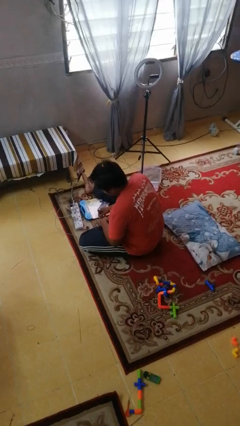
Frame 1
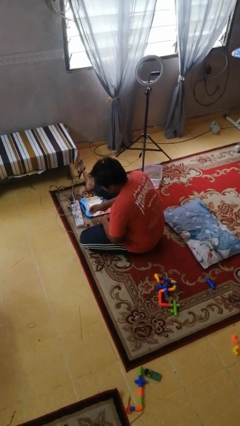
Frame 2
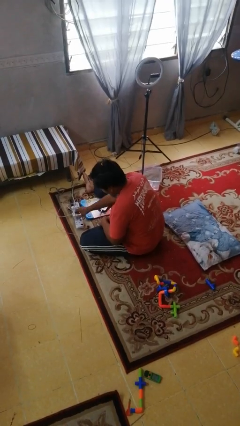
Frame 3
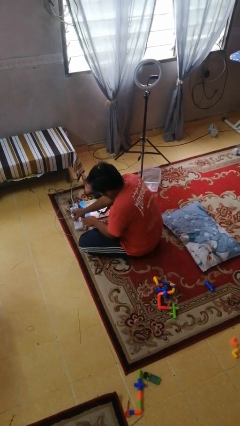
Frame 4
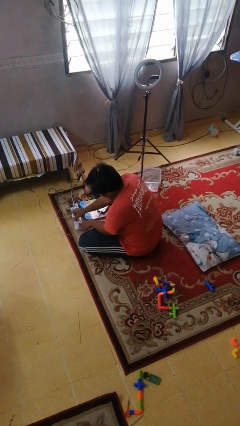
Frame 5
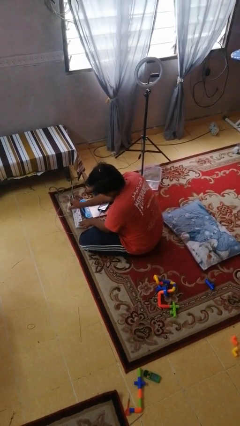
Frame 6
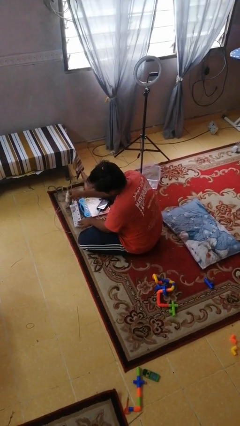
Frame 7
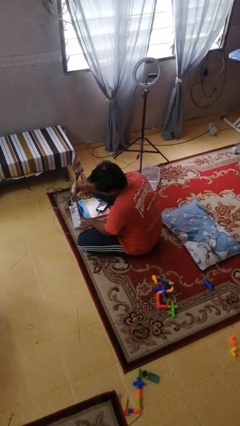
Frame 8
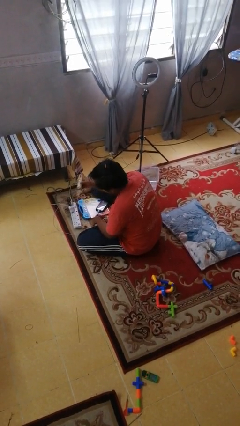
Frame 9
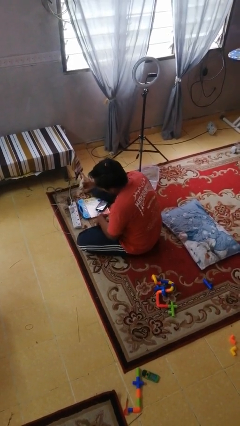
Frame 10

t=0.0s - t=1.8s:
person unplugs from electrical socket

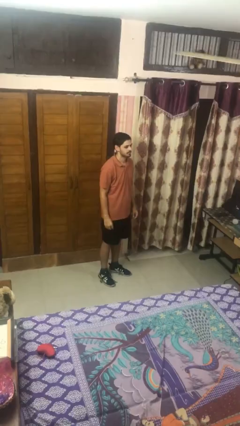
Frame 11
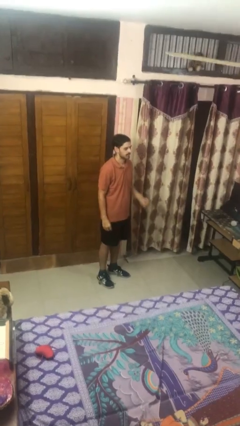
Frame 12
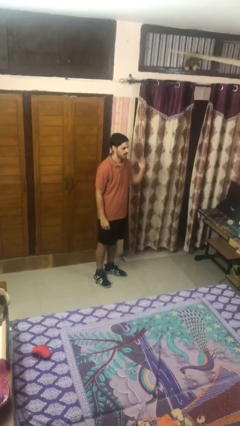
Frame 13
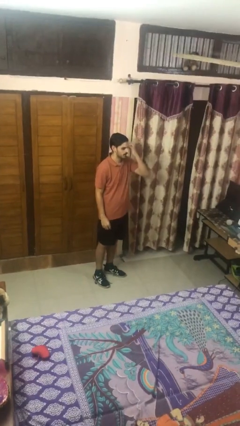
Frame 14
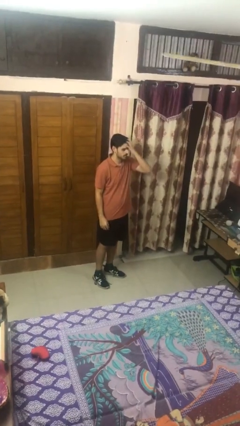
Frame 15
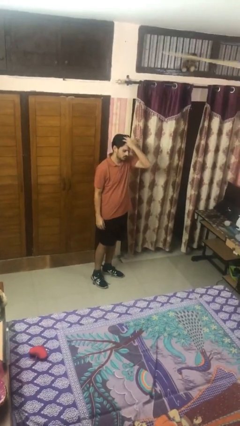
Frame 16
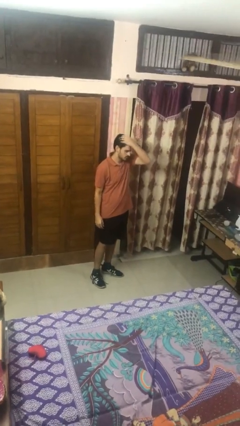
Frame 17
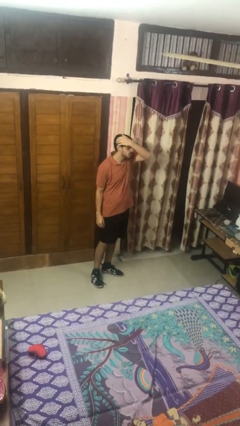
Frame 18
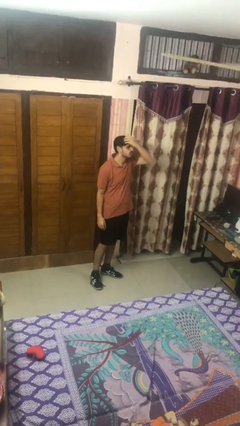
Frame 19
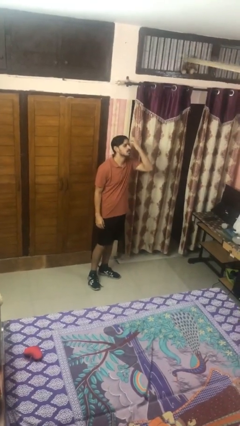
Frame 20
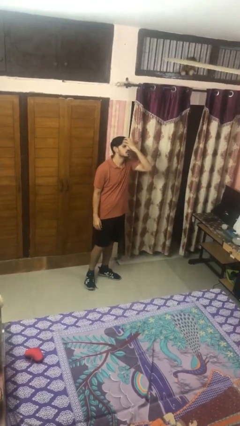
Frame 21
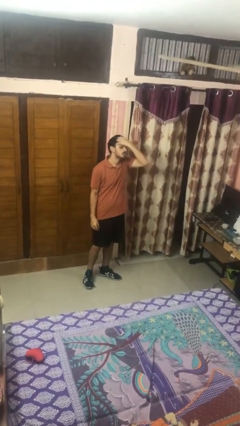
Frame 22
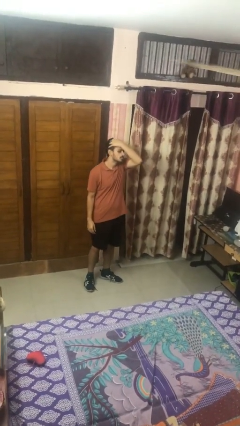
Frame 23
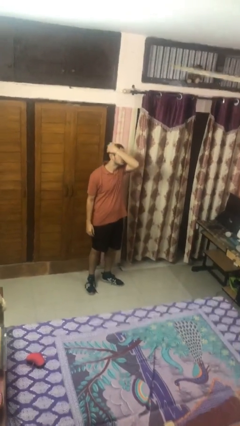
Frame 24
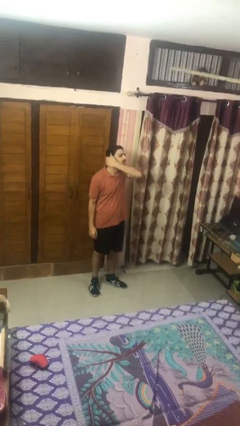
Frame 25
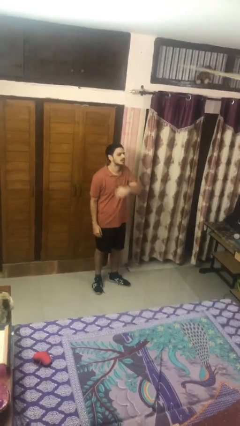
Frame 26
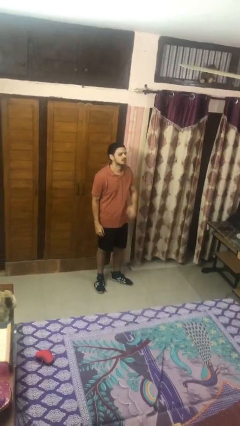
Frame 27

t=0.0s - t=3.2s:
person strokes hair

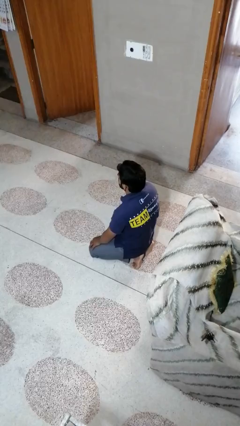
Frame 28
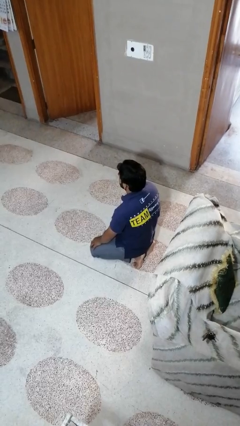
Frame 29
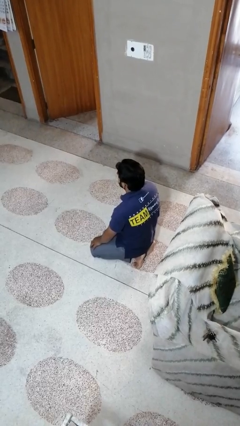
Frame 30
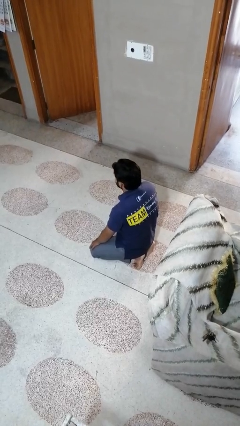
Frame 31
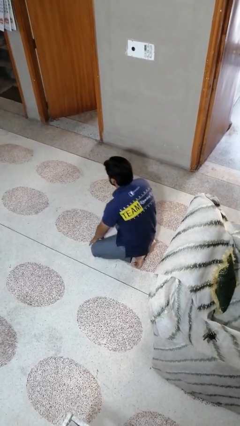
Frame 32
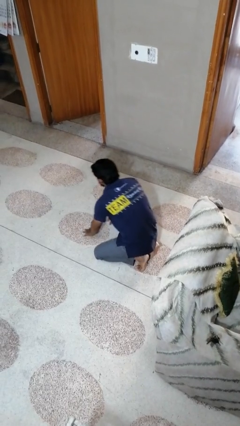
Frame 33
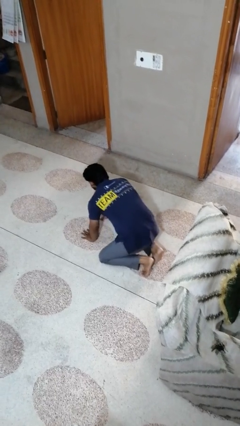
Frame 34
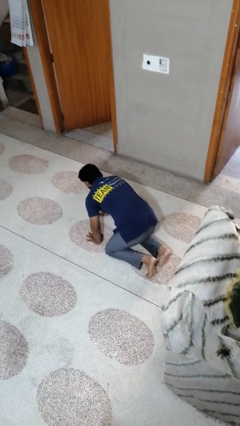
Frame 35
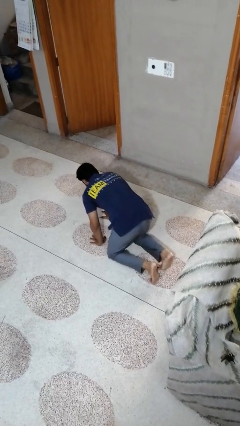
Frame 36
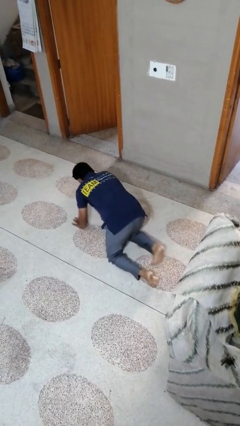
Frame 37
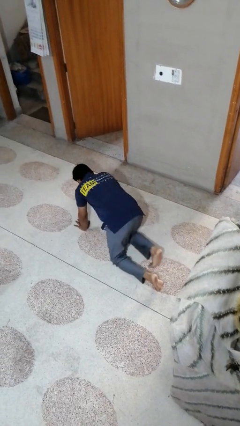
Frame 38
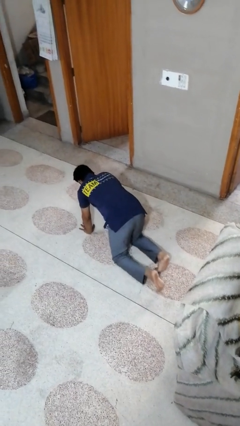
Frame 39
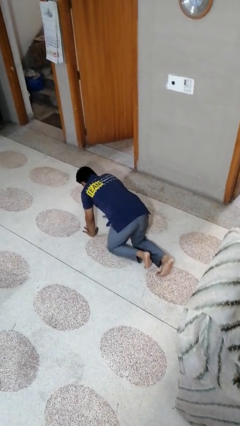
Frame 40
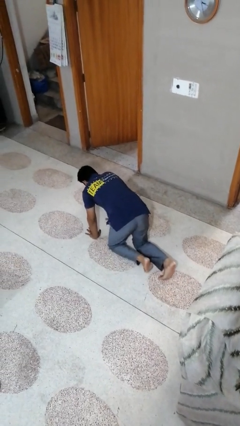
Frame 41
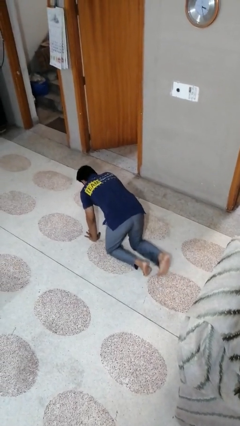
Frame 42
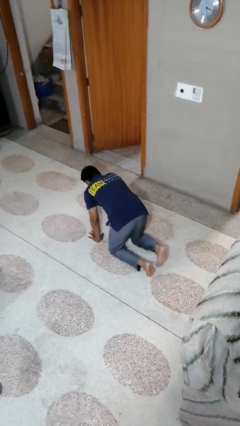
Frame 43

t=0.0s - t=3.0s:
person crawls

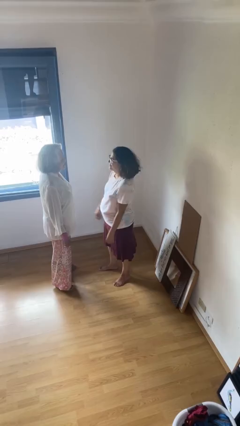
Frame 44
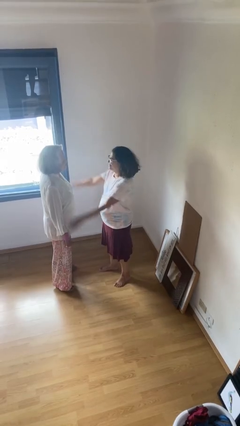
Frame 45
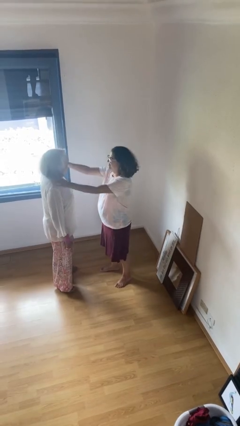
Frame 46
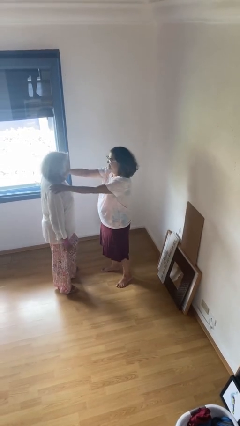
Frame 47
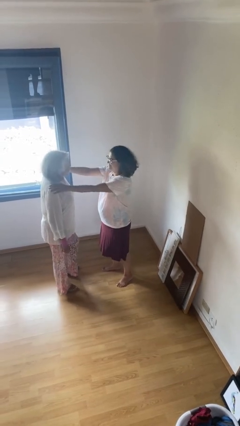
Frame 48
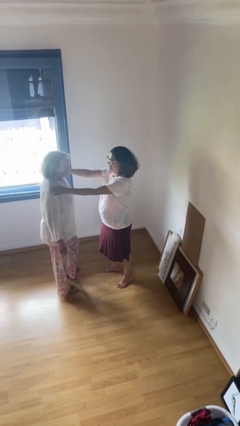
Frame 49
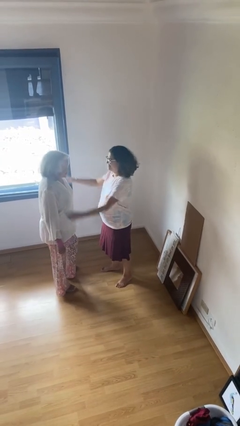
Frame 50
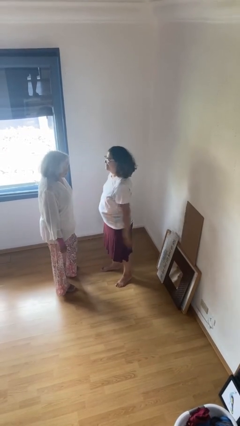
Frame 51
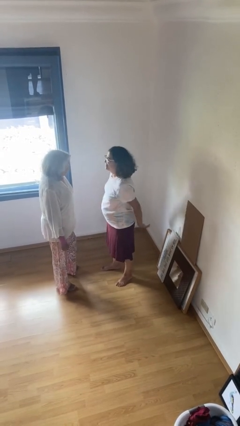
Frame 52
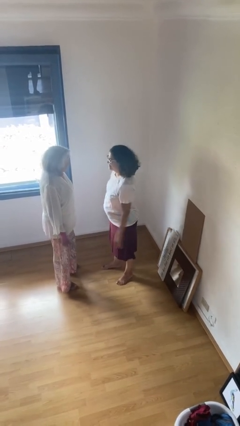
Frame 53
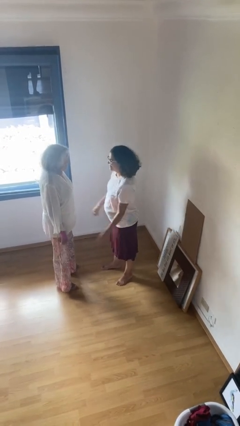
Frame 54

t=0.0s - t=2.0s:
person pounds shoulders of person

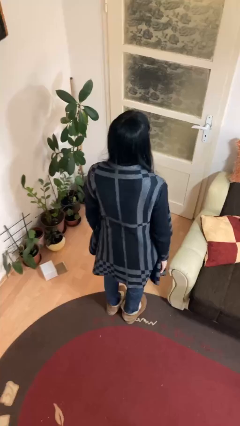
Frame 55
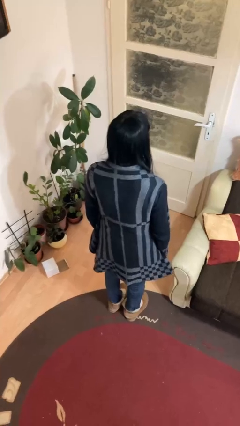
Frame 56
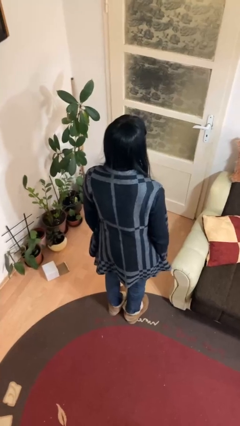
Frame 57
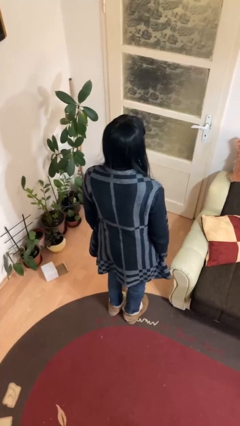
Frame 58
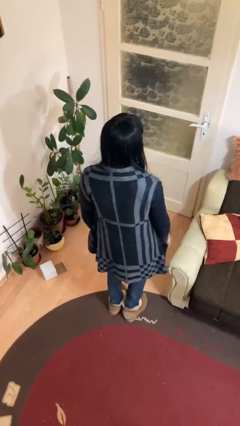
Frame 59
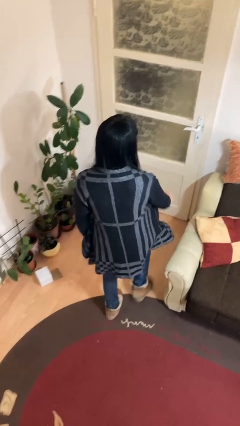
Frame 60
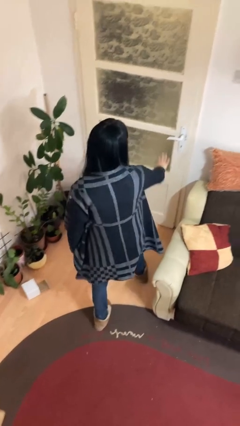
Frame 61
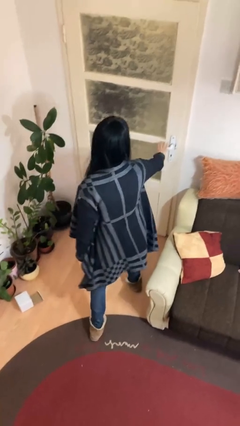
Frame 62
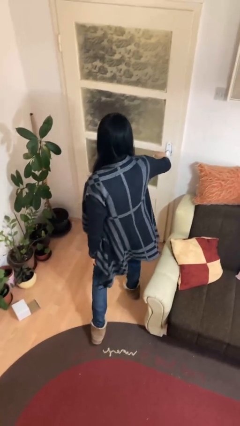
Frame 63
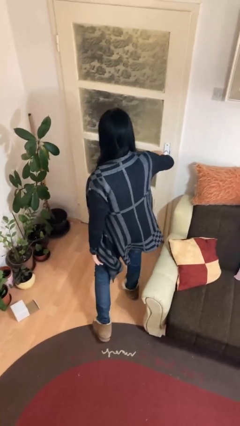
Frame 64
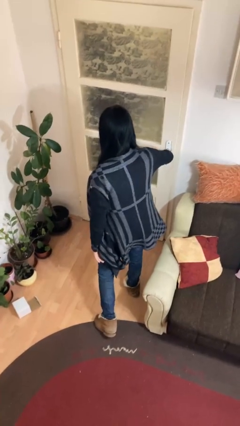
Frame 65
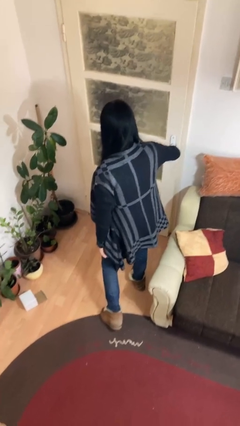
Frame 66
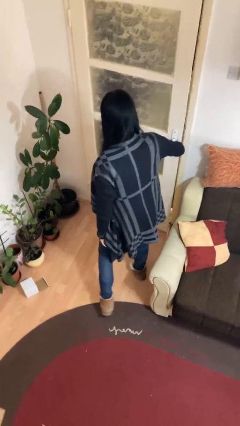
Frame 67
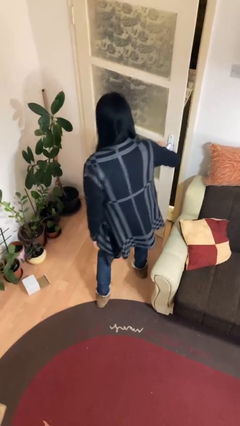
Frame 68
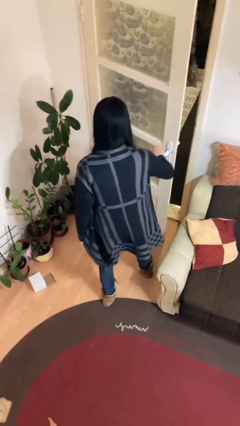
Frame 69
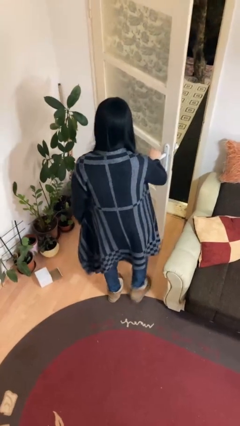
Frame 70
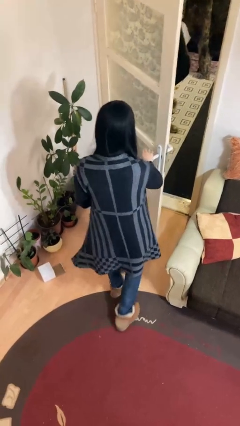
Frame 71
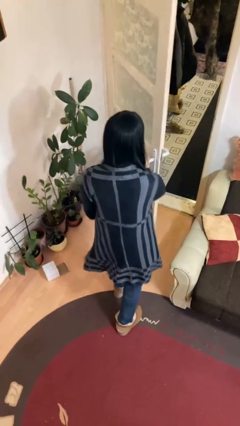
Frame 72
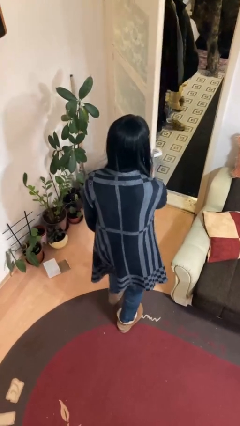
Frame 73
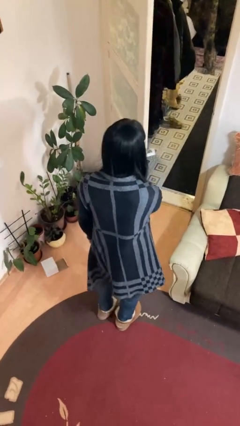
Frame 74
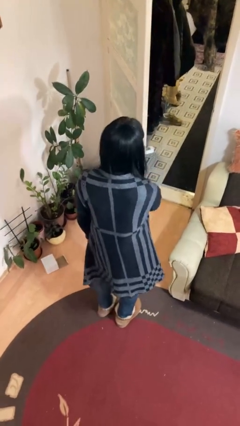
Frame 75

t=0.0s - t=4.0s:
person opens facility door

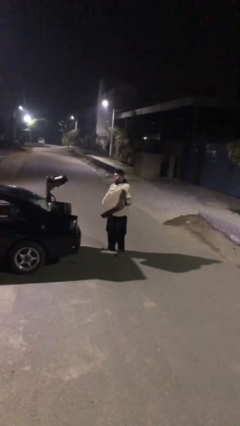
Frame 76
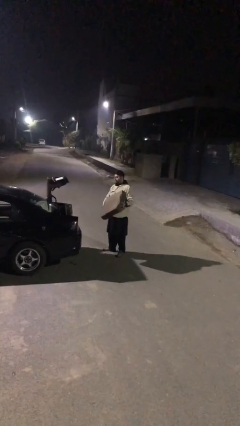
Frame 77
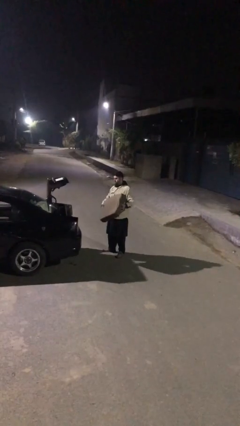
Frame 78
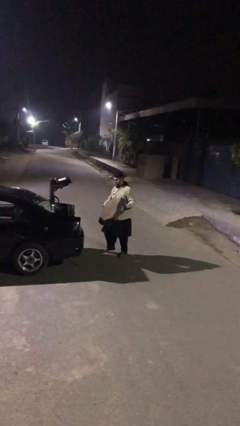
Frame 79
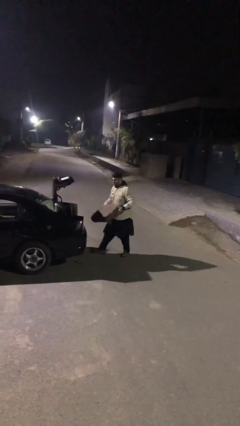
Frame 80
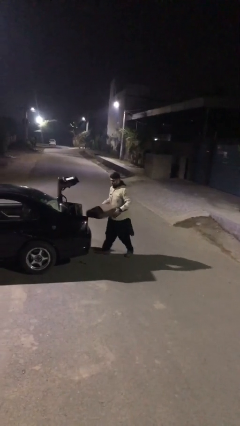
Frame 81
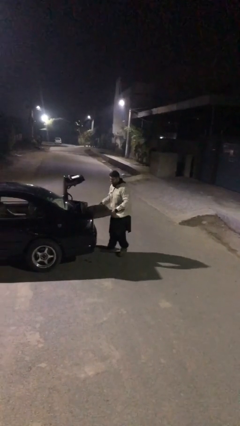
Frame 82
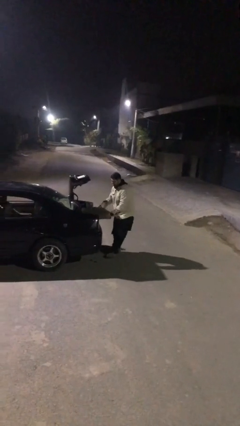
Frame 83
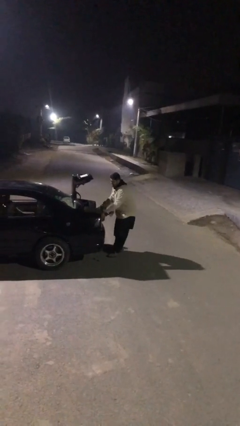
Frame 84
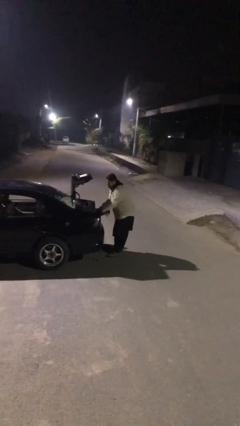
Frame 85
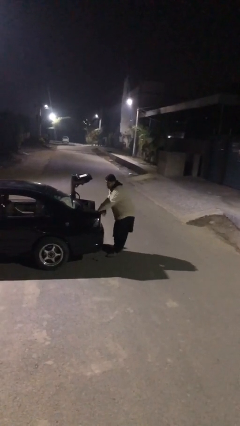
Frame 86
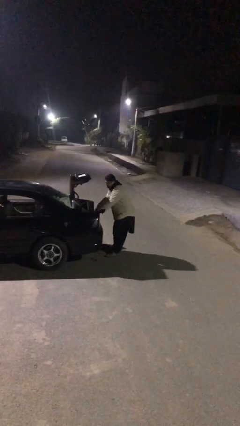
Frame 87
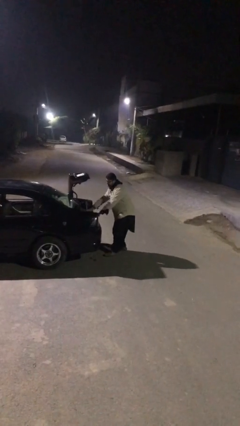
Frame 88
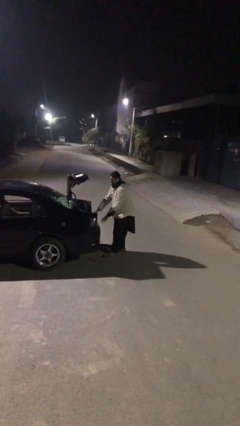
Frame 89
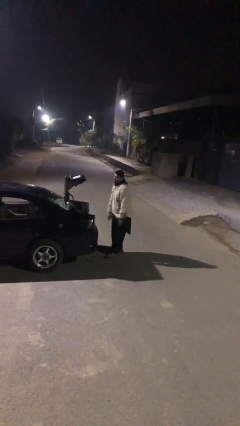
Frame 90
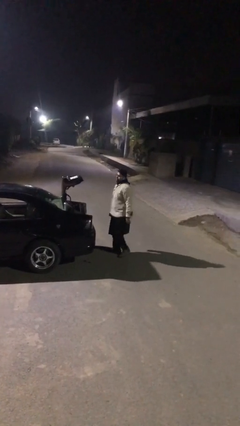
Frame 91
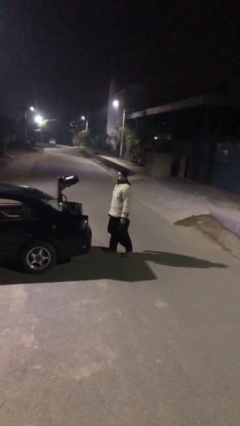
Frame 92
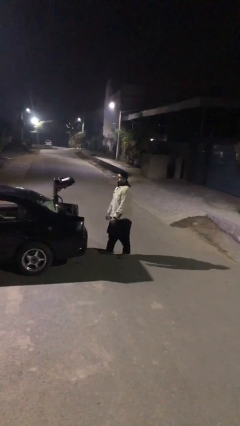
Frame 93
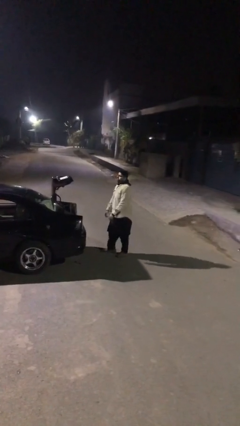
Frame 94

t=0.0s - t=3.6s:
person loads car
